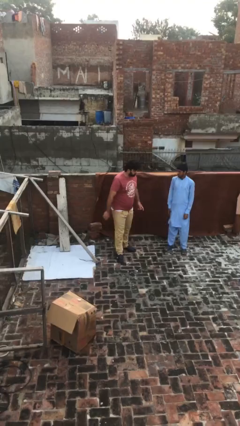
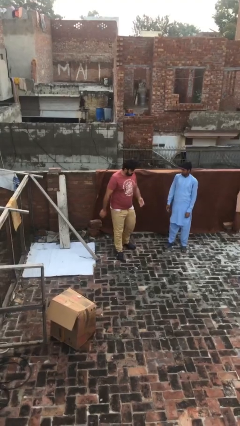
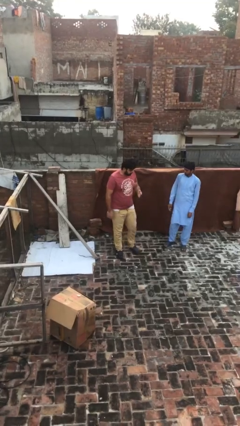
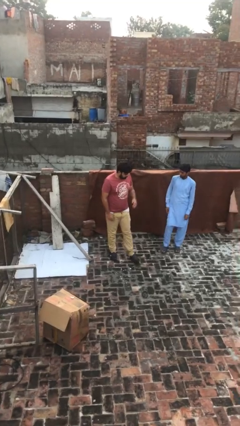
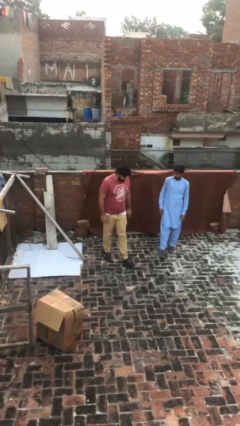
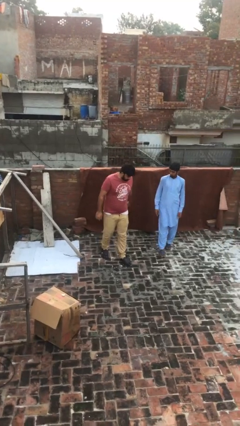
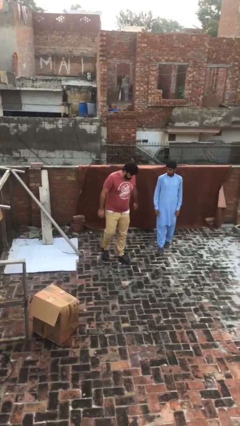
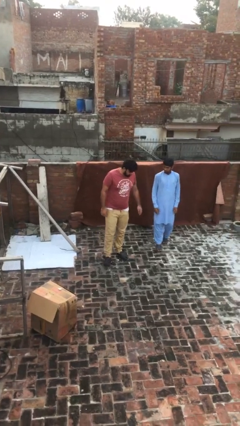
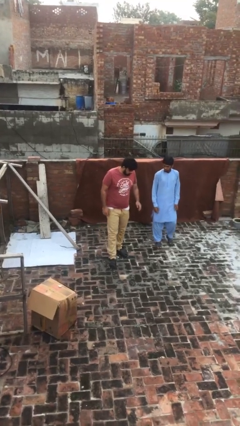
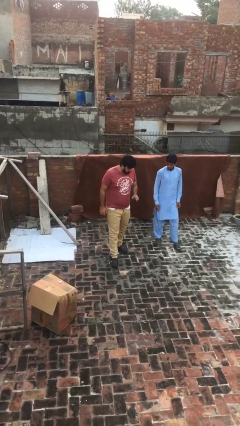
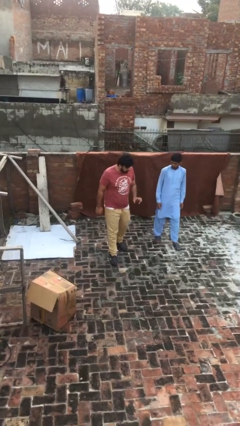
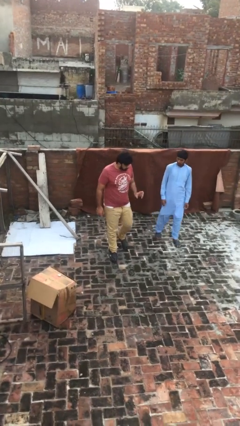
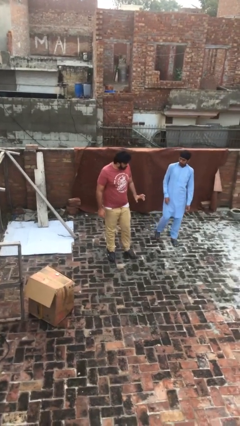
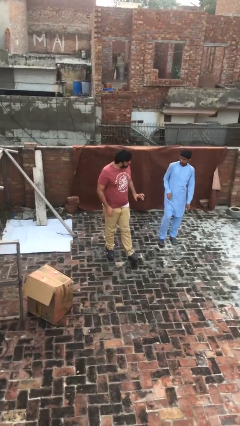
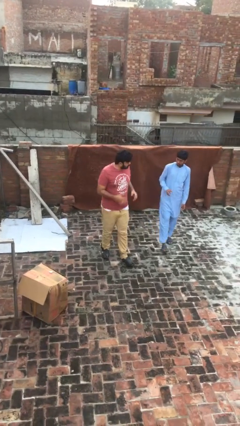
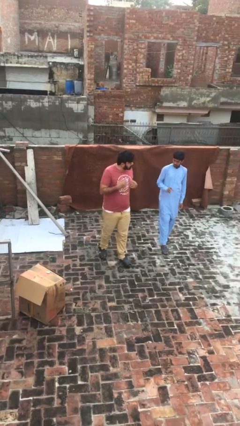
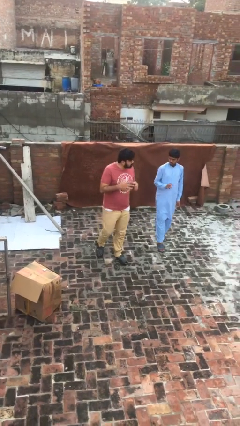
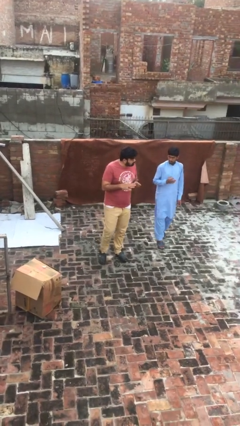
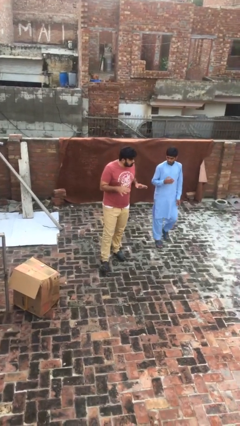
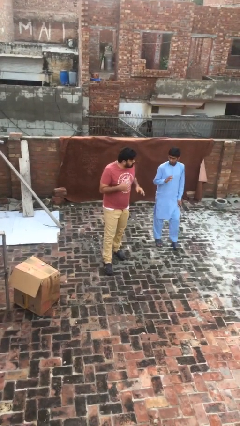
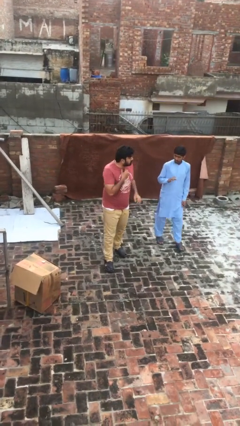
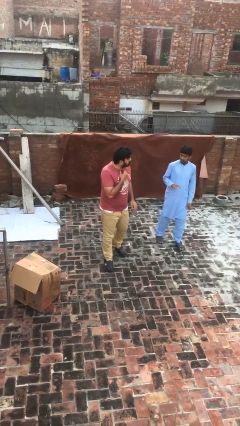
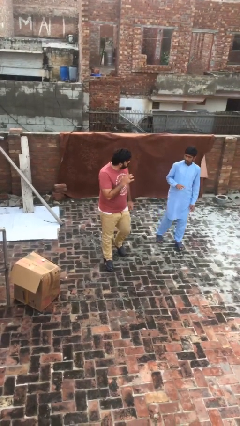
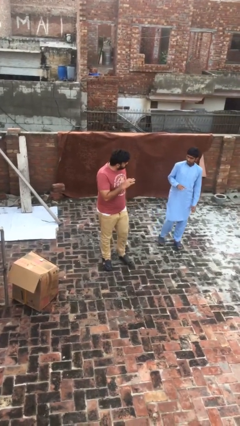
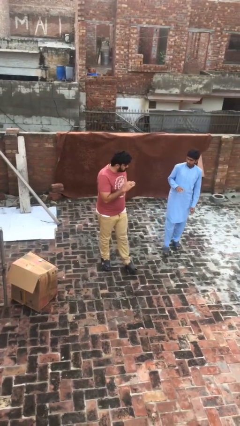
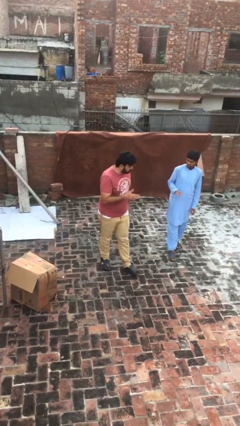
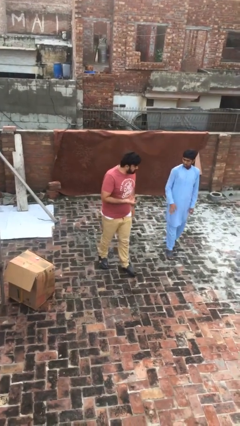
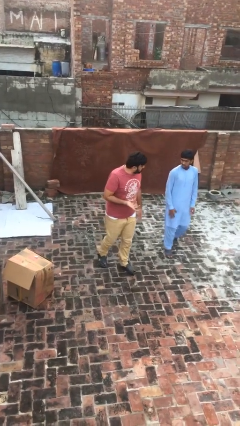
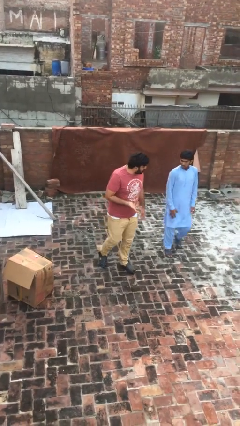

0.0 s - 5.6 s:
person talks to person

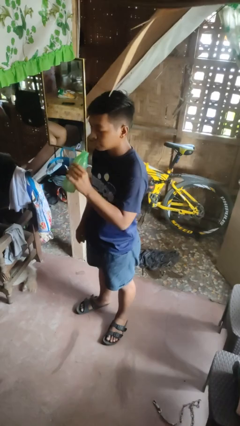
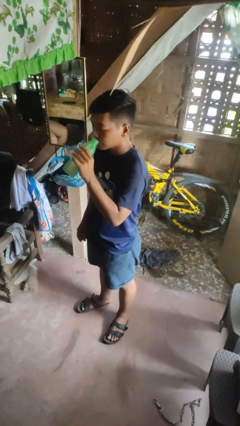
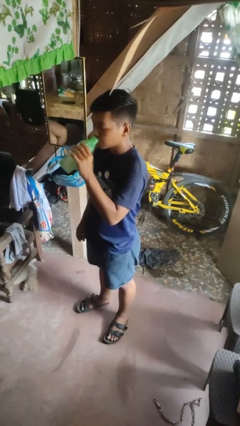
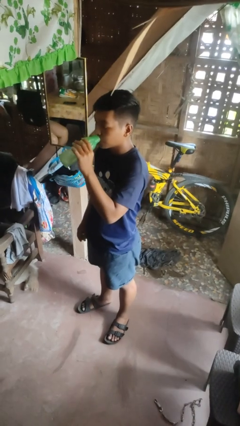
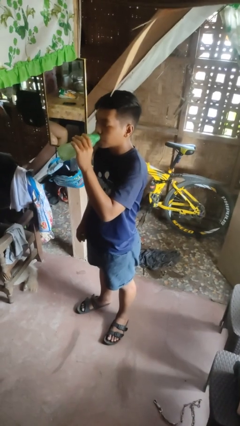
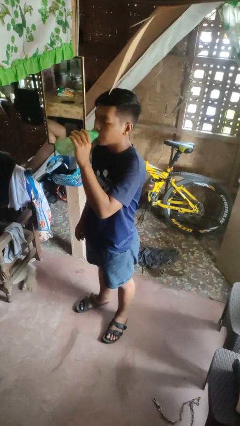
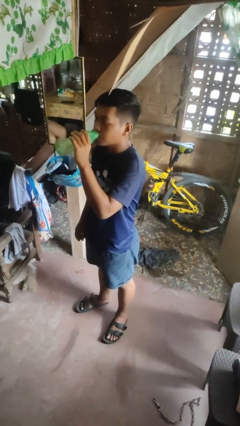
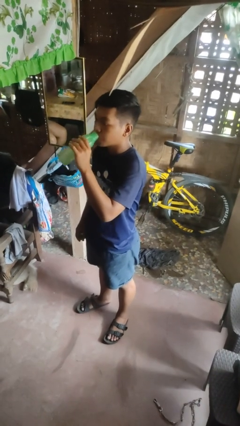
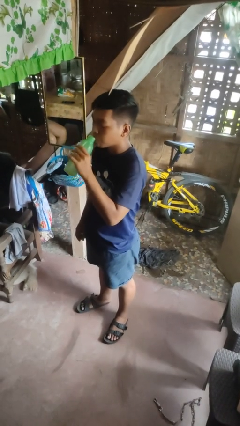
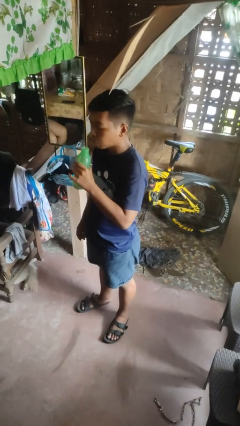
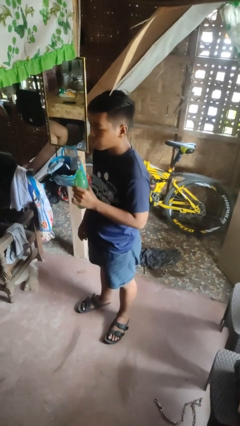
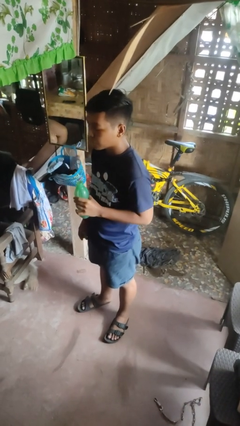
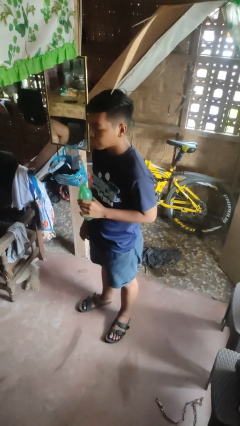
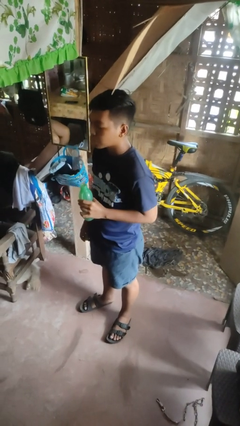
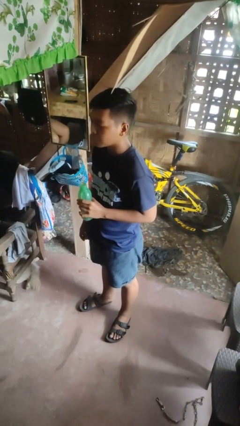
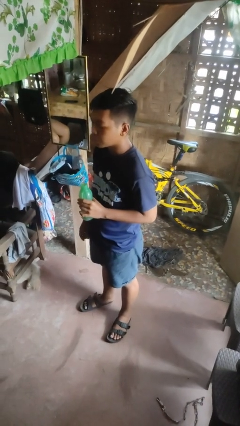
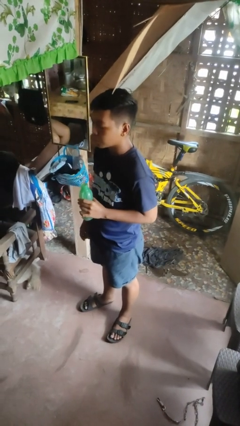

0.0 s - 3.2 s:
person drinks from bottle

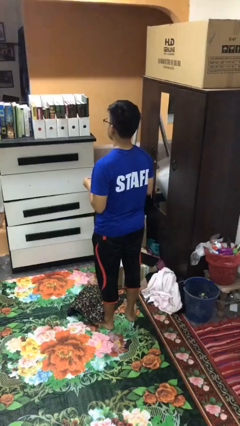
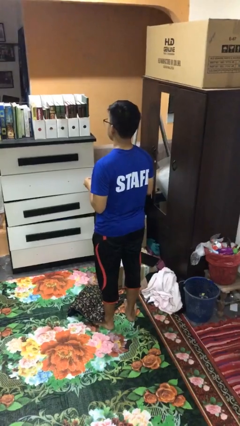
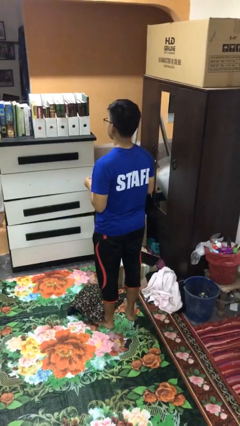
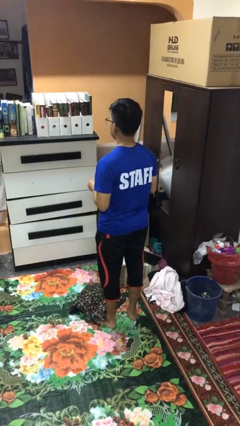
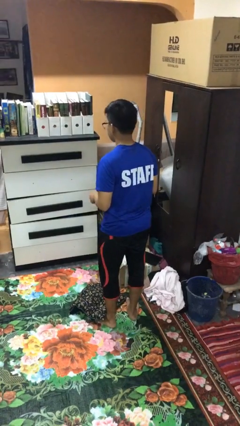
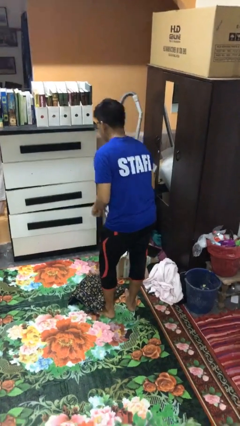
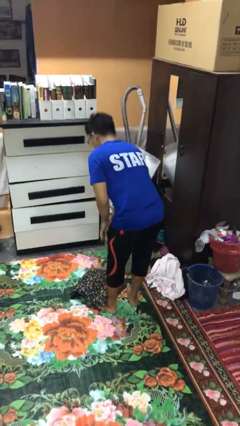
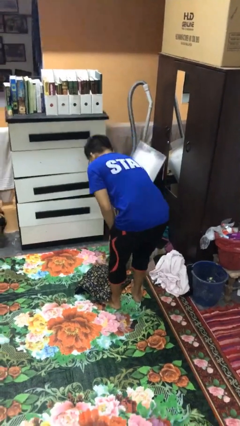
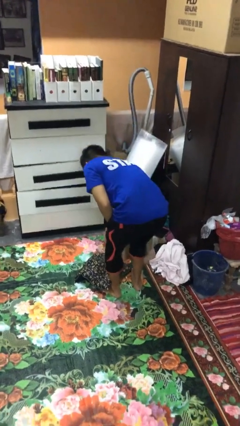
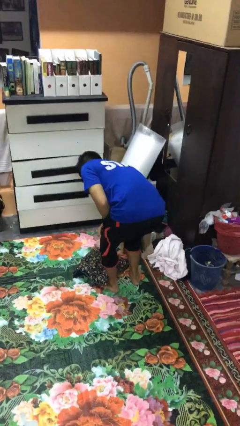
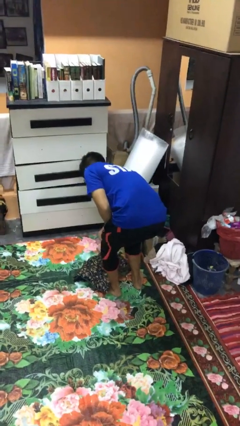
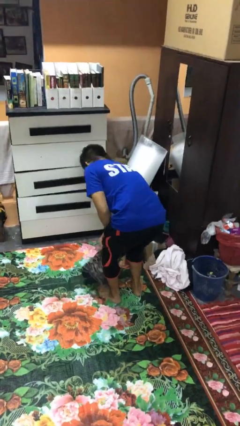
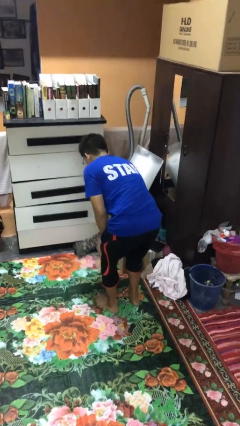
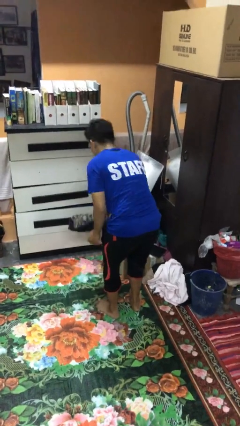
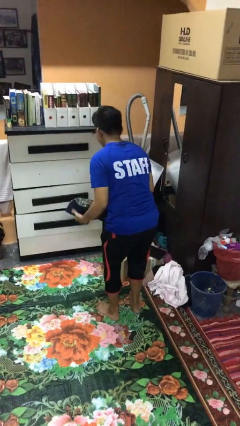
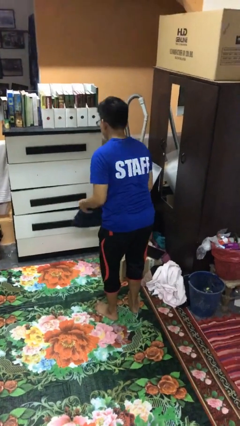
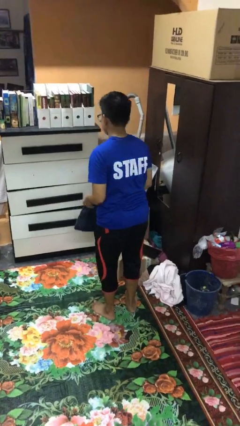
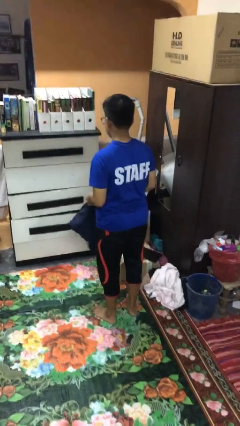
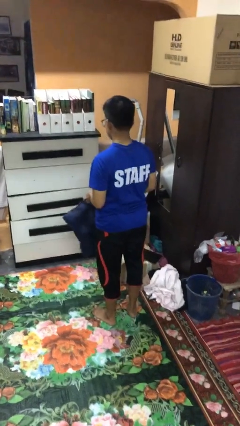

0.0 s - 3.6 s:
person picks up object from floor

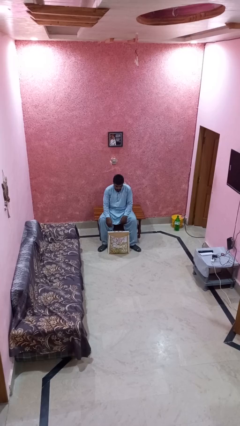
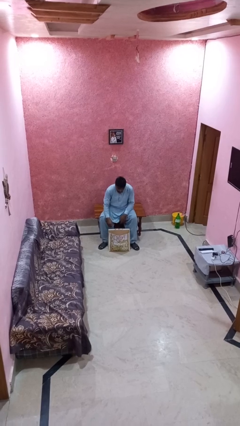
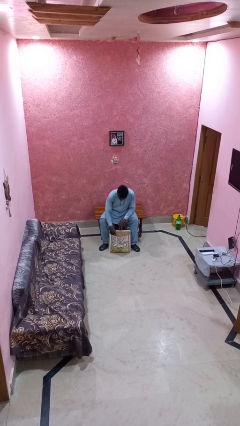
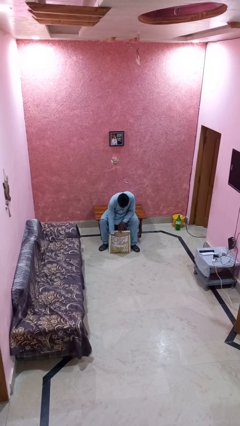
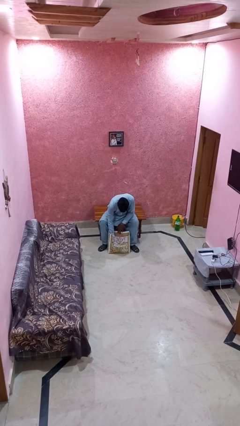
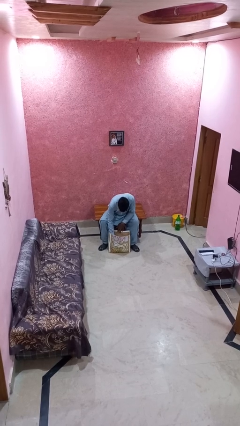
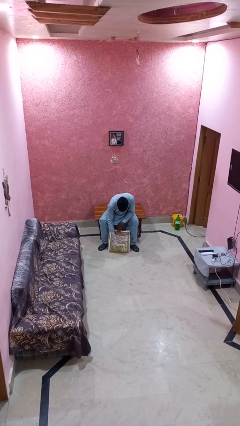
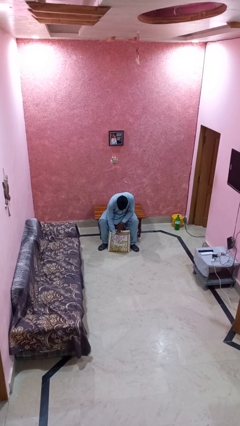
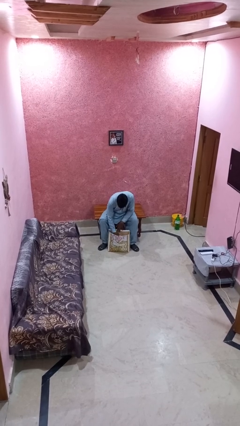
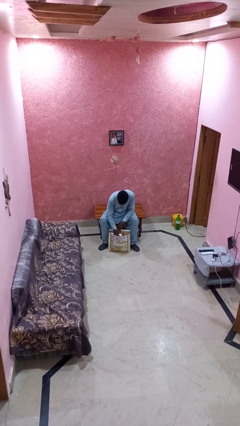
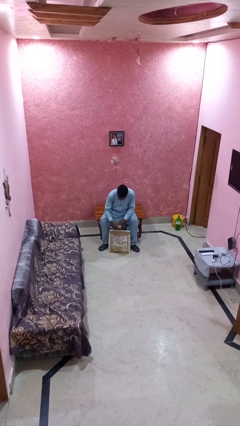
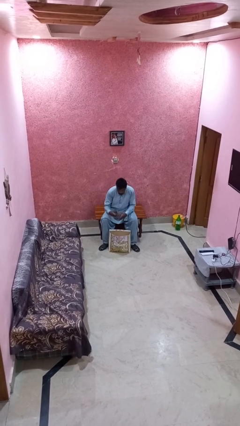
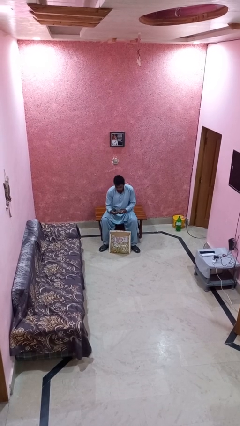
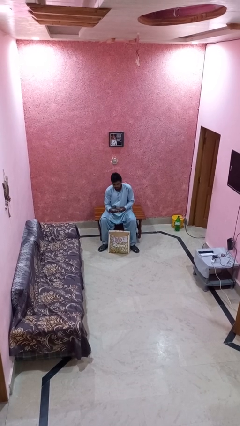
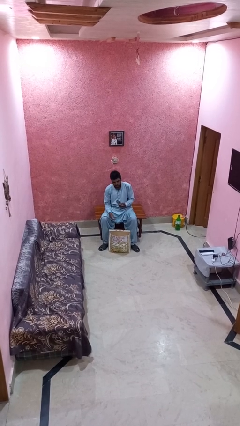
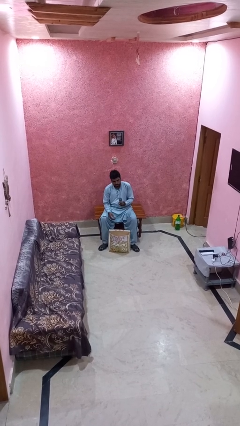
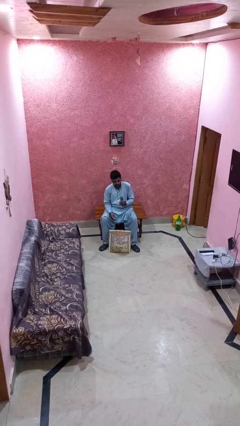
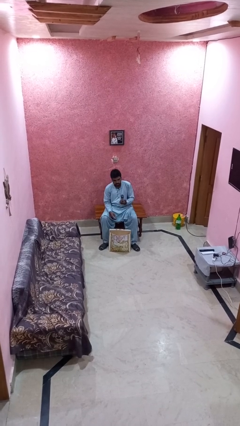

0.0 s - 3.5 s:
person takes object from bag

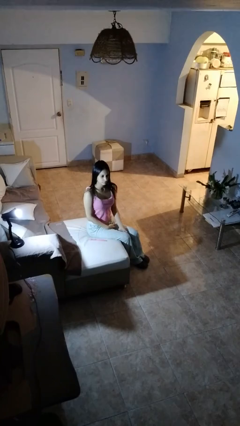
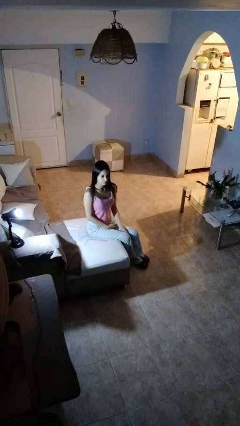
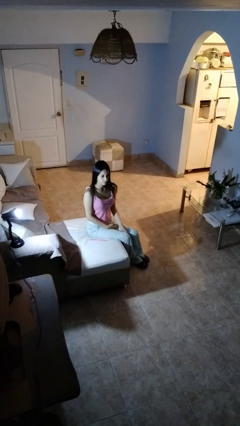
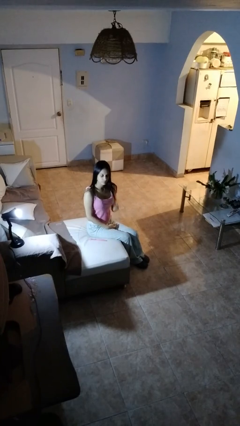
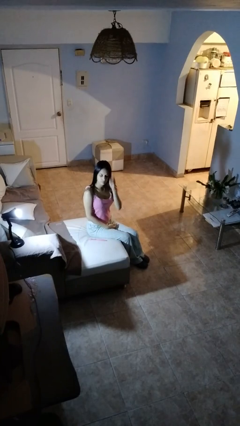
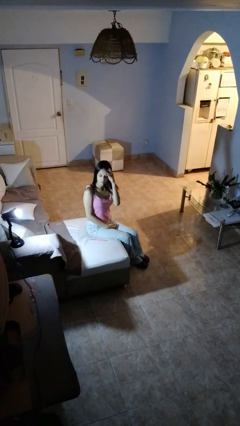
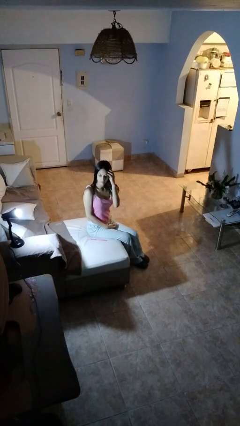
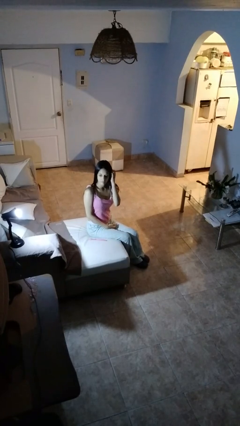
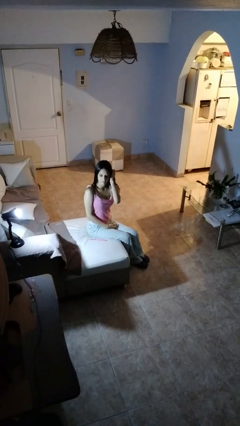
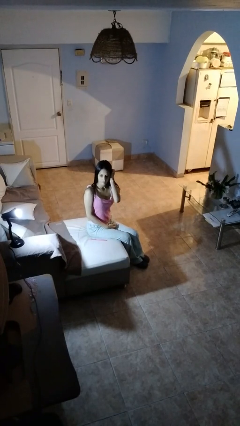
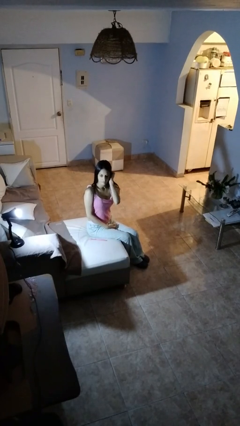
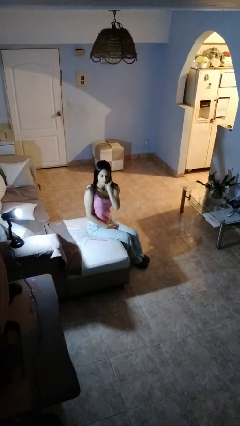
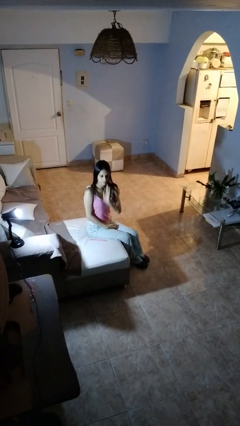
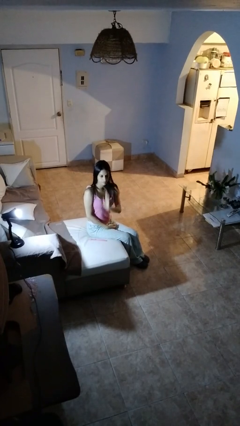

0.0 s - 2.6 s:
person strokes hair
